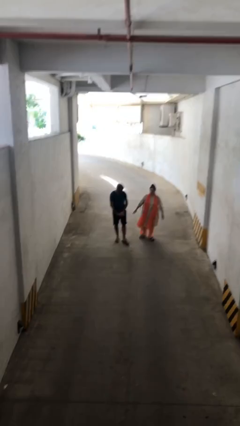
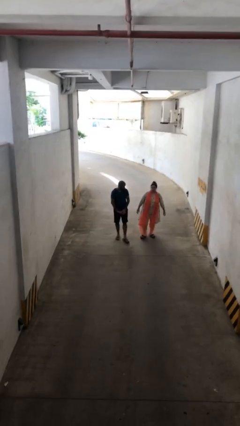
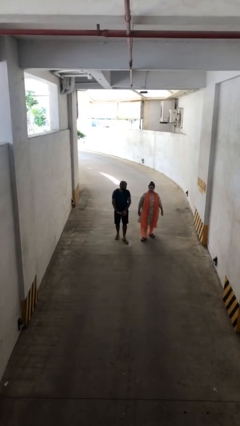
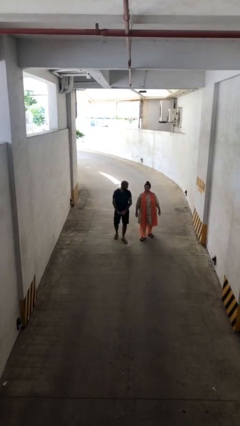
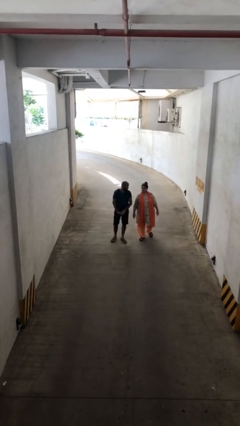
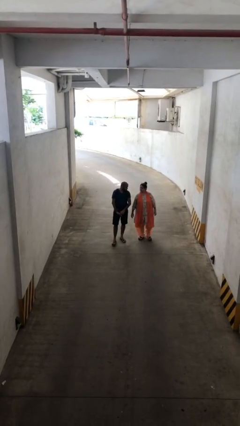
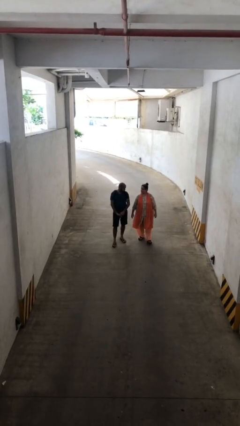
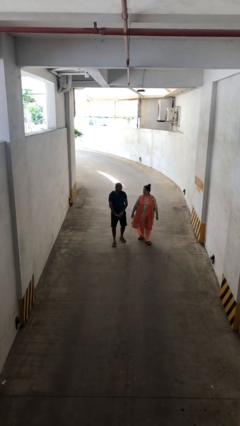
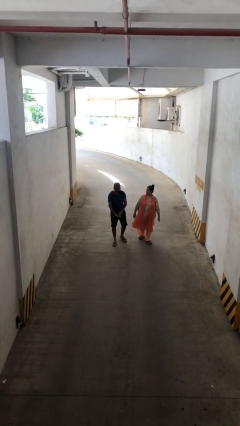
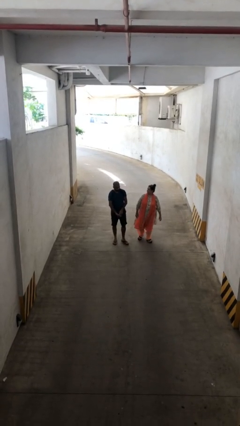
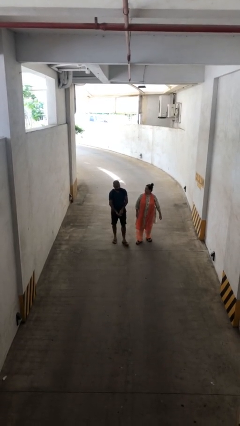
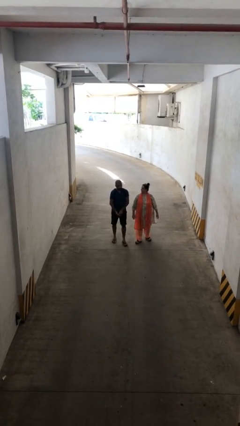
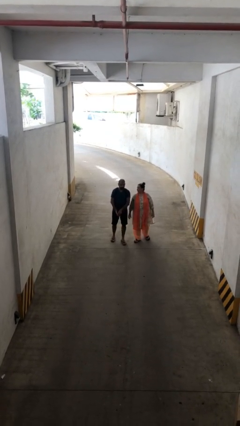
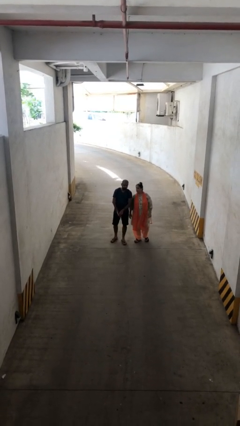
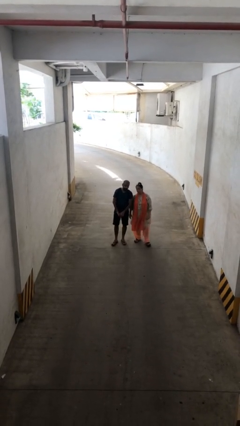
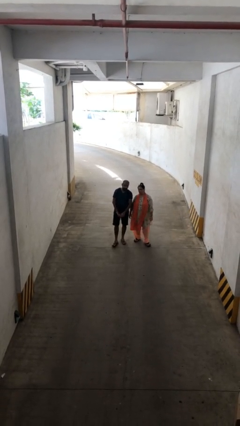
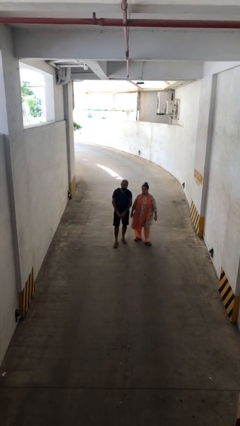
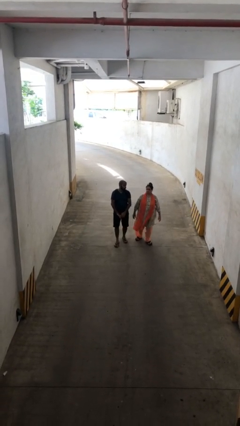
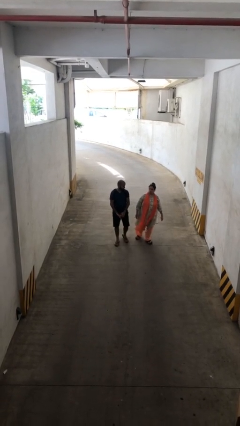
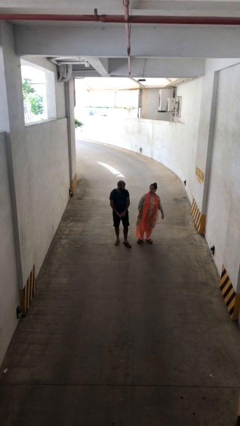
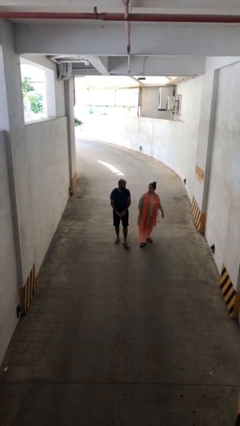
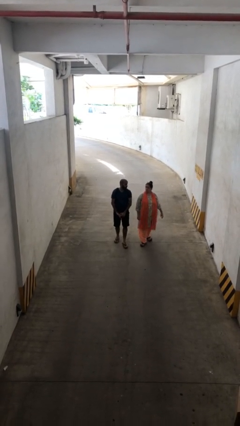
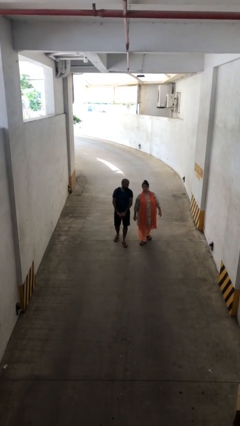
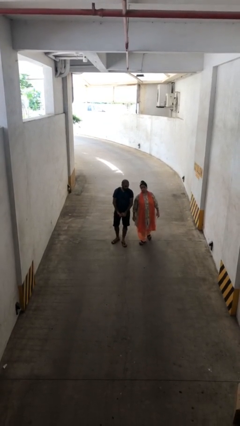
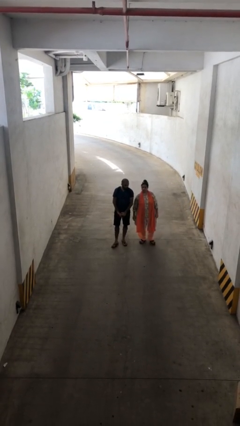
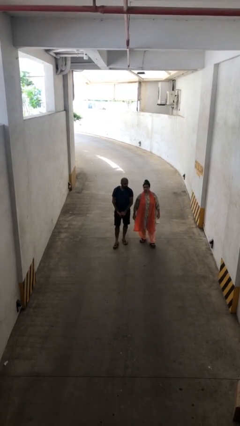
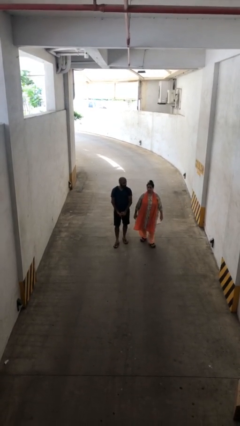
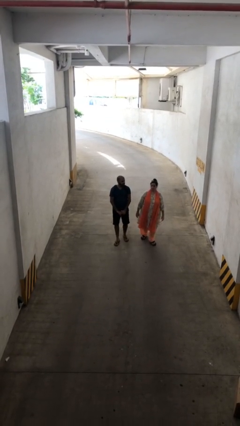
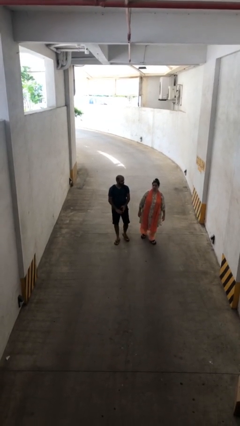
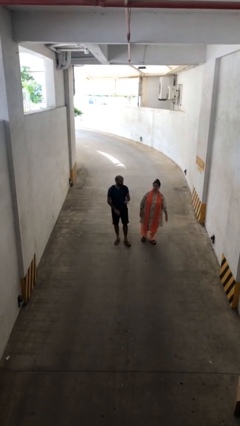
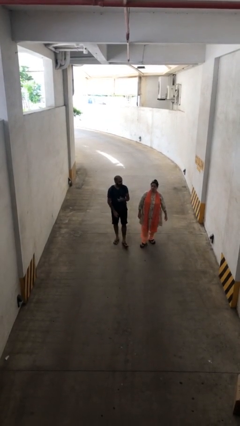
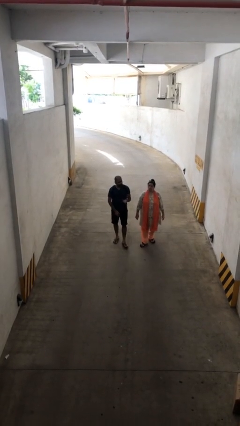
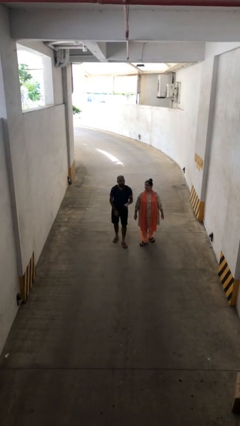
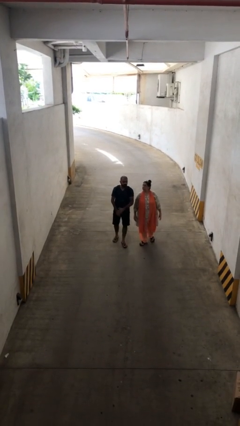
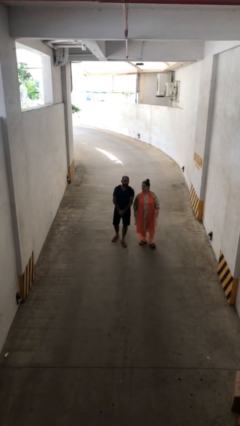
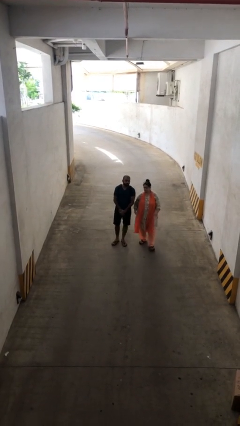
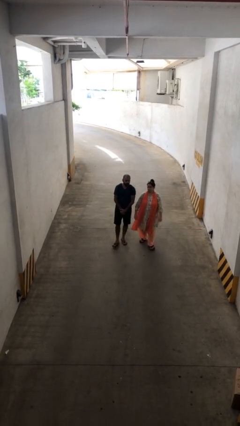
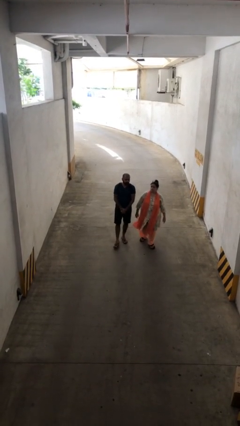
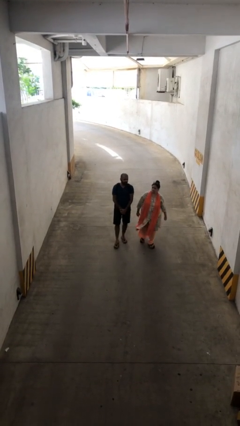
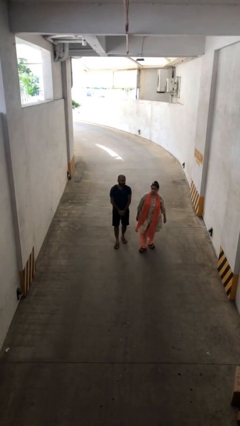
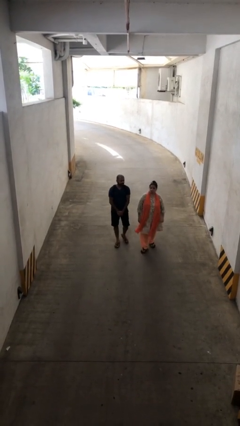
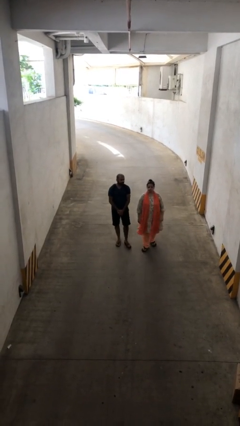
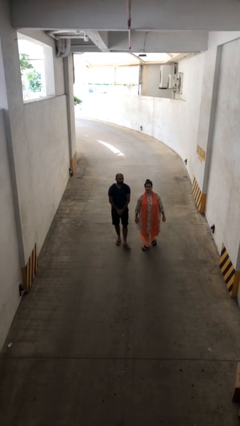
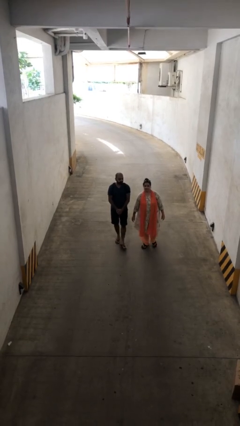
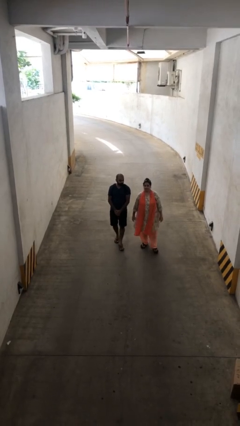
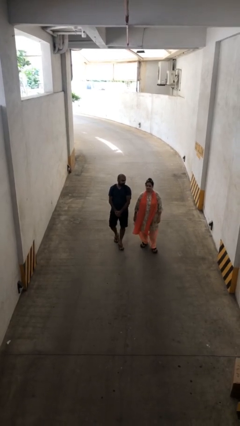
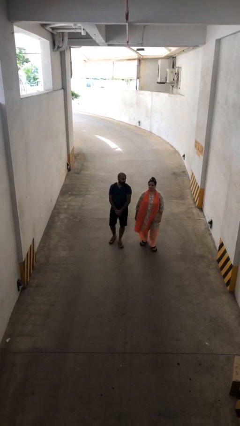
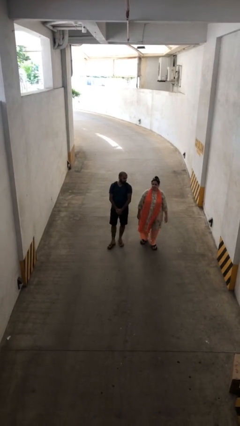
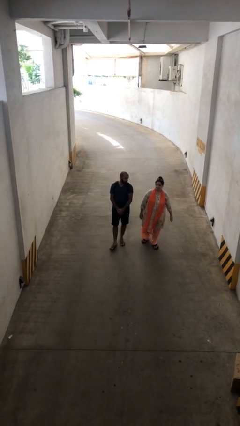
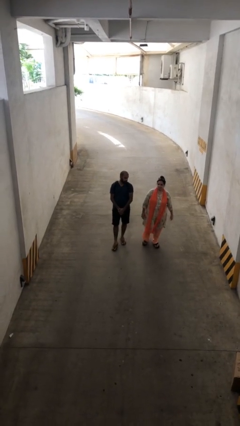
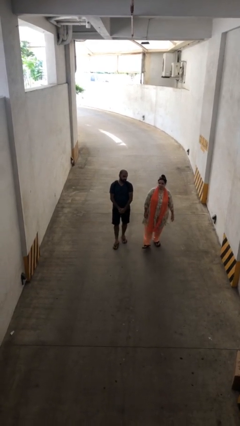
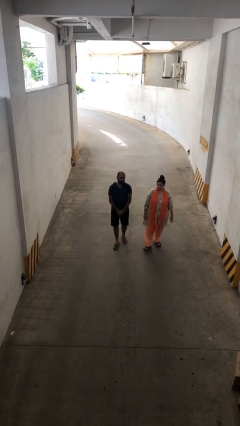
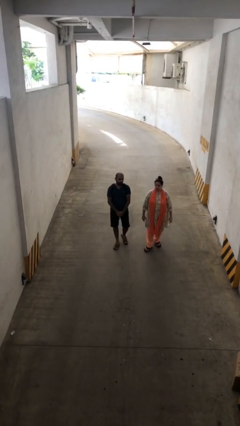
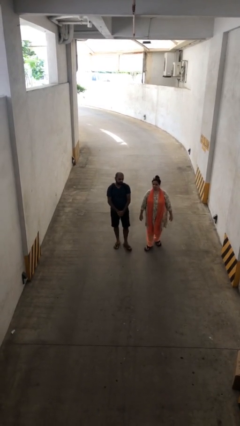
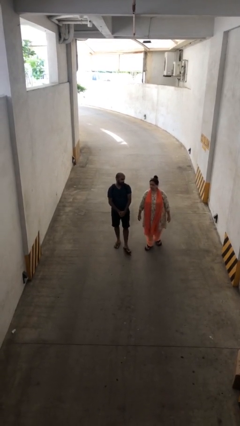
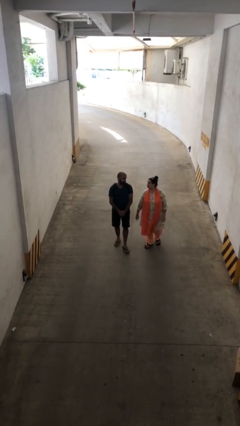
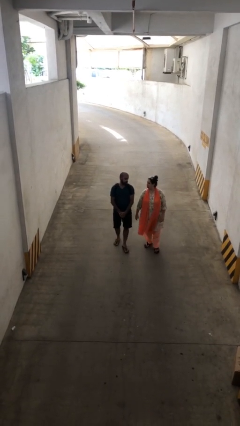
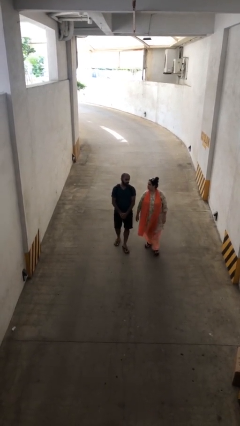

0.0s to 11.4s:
person talks to person

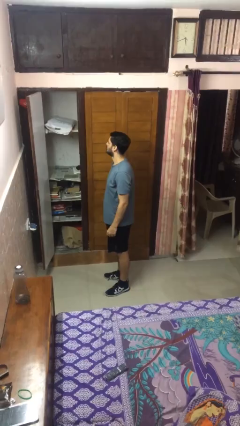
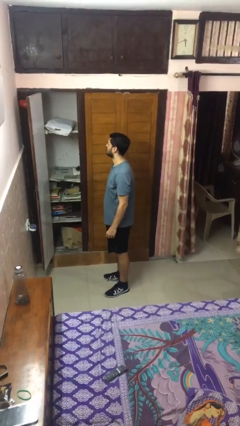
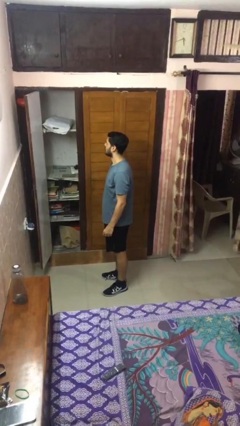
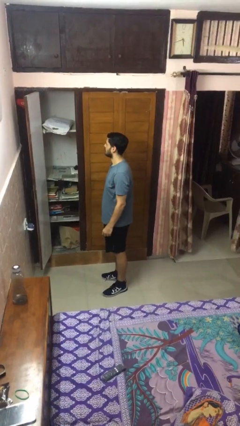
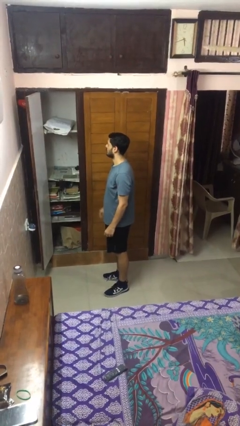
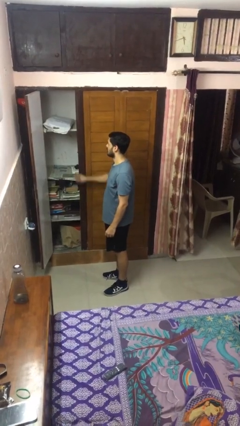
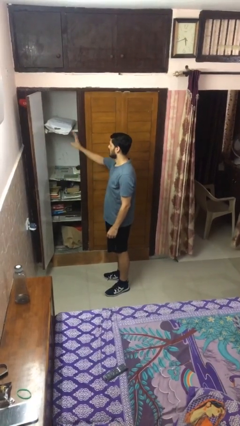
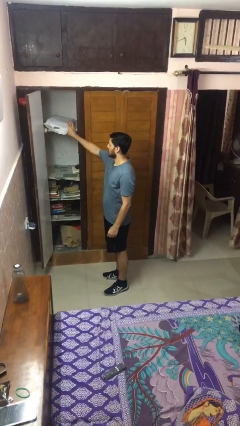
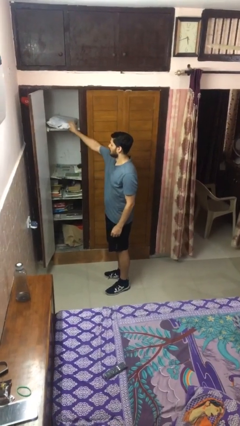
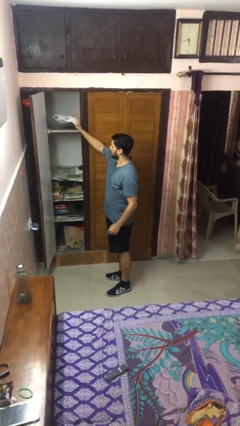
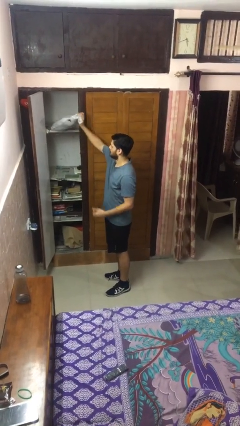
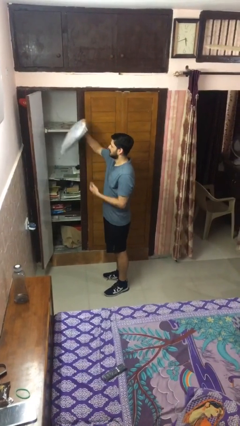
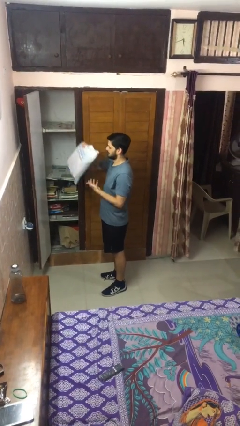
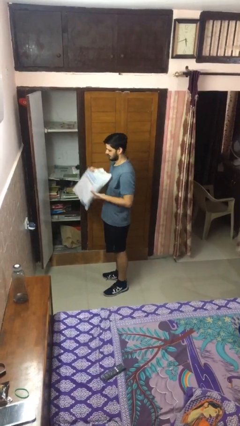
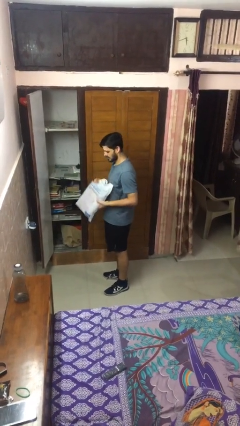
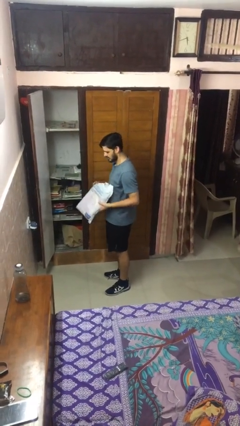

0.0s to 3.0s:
person picks up object from shelf

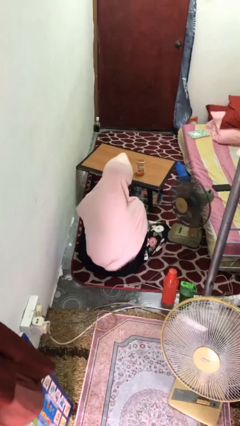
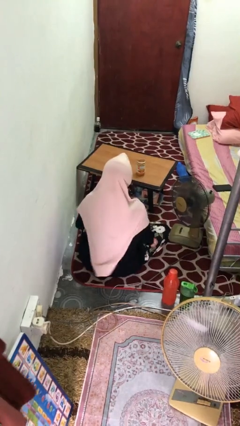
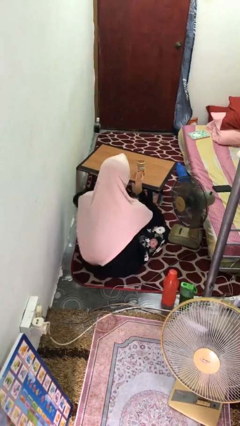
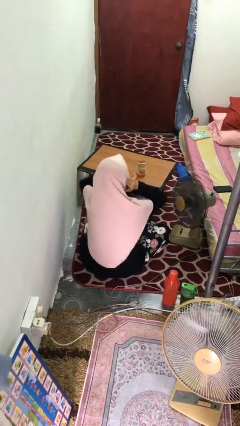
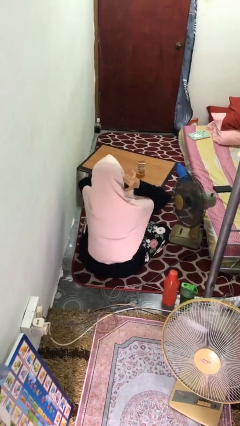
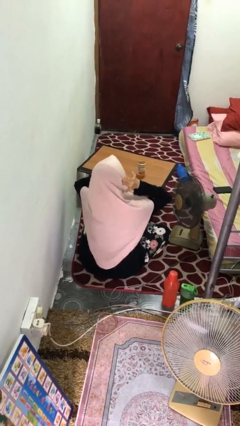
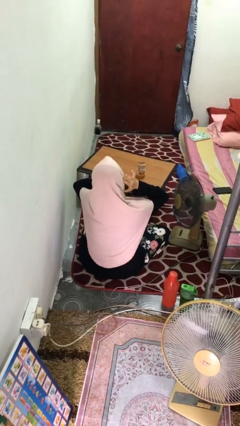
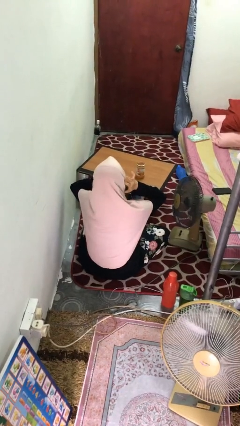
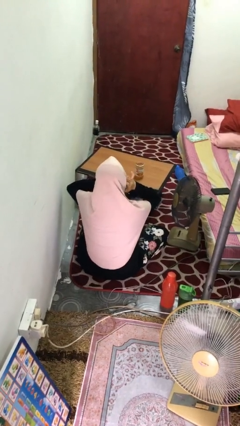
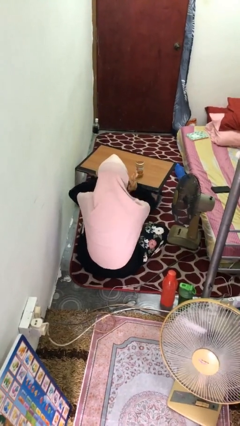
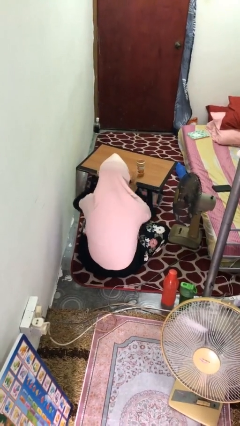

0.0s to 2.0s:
person puts fingers in ear

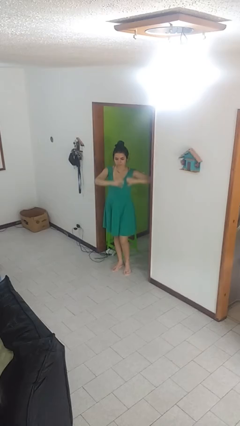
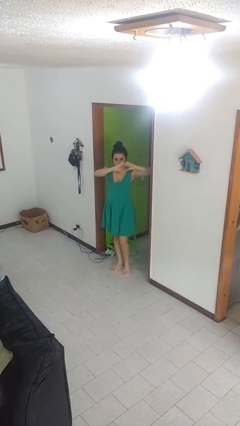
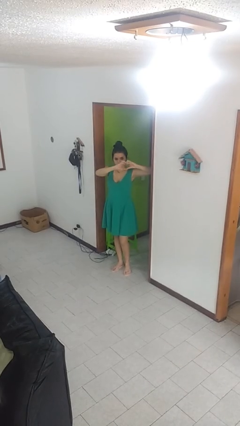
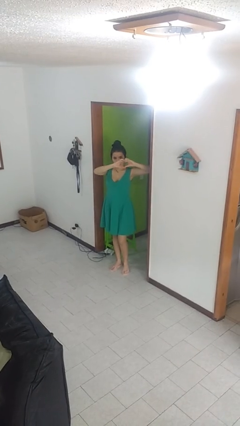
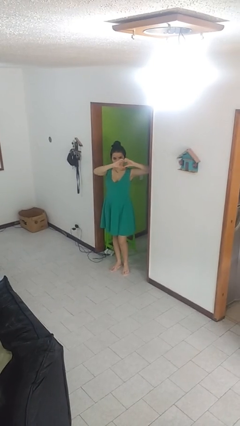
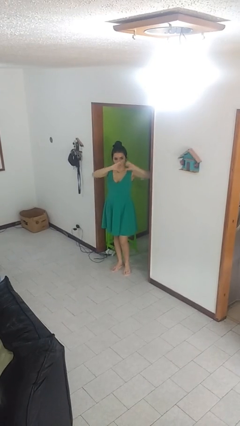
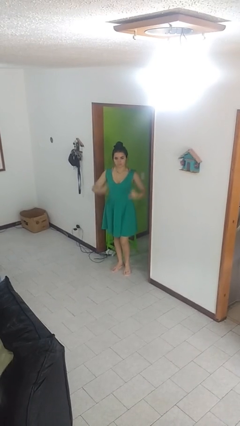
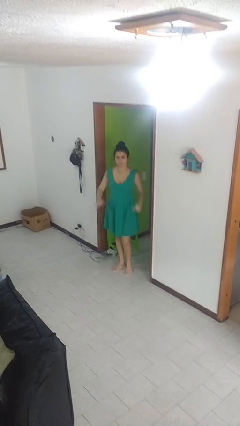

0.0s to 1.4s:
person gestures heart
